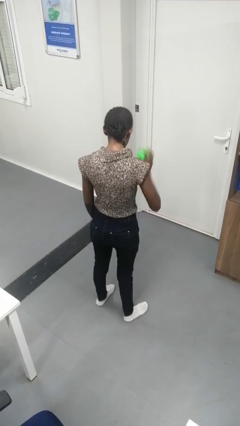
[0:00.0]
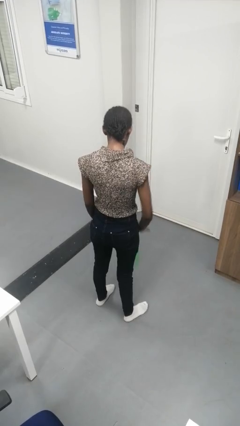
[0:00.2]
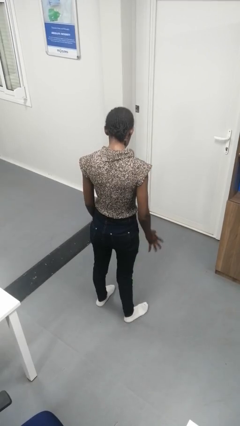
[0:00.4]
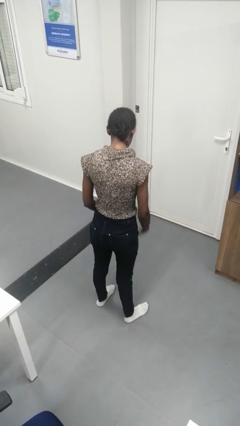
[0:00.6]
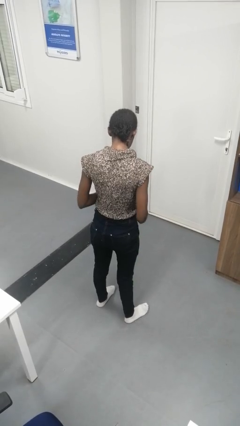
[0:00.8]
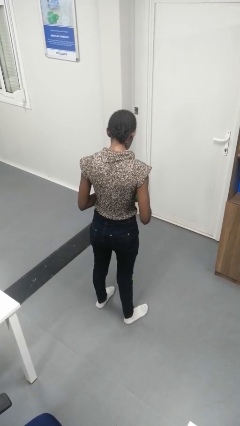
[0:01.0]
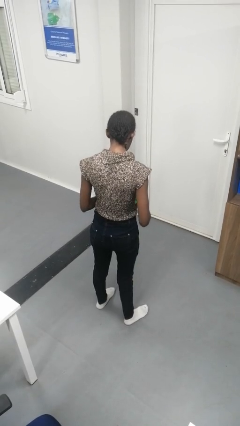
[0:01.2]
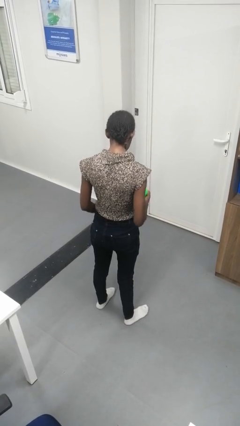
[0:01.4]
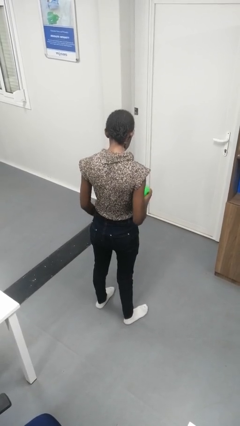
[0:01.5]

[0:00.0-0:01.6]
person bounces ball on floor

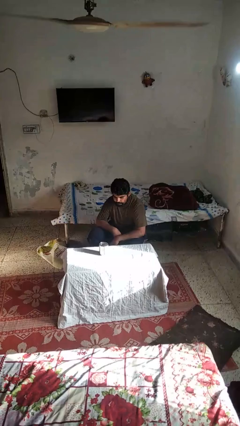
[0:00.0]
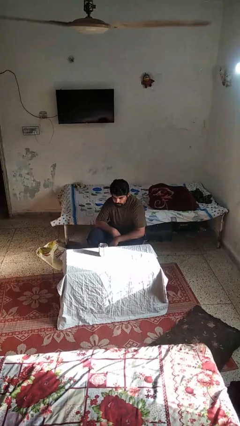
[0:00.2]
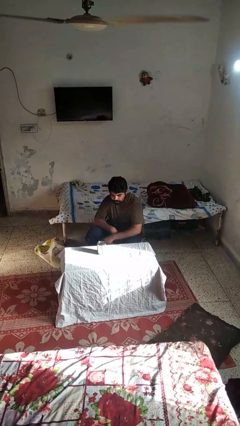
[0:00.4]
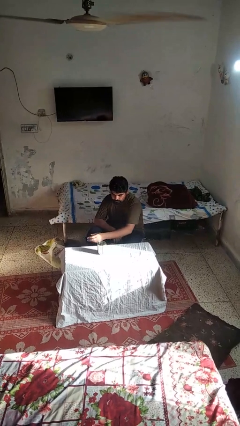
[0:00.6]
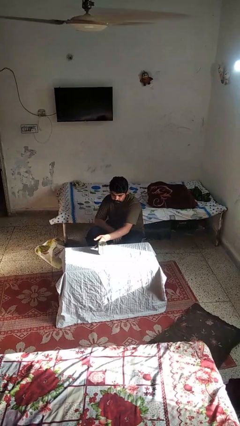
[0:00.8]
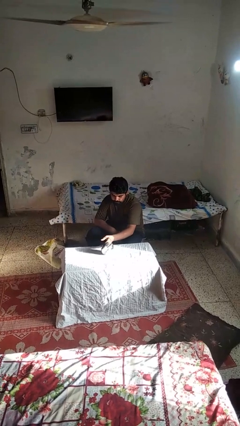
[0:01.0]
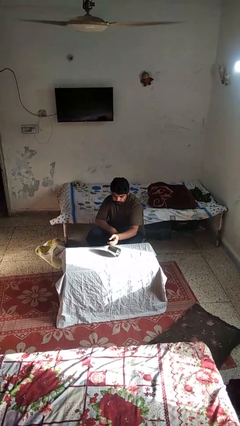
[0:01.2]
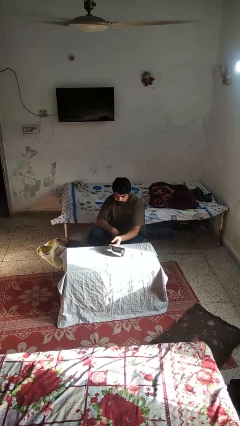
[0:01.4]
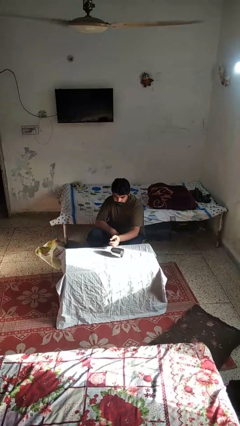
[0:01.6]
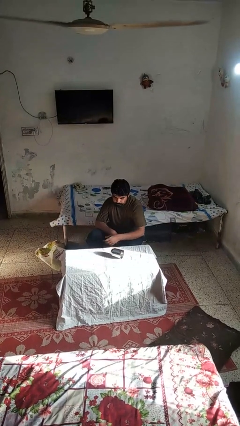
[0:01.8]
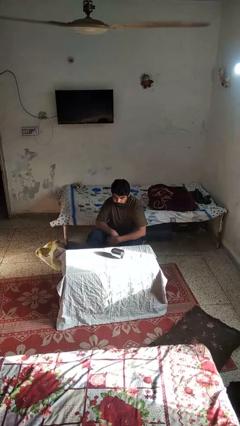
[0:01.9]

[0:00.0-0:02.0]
person knocks over glass

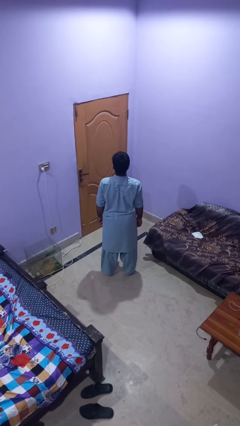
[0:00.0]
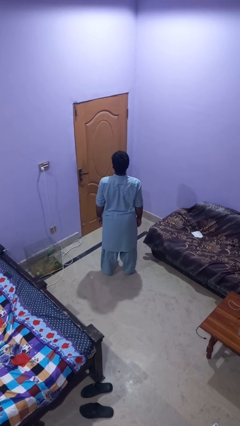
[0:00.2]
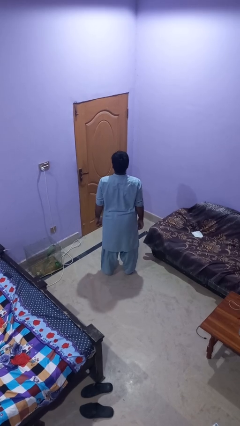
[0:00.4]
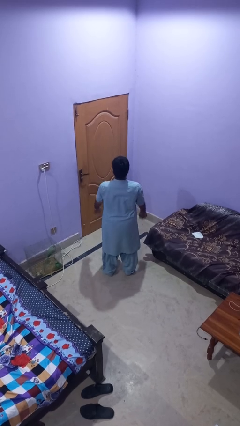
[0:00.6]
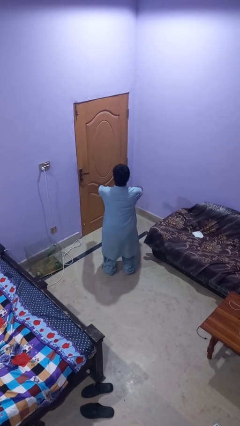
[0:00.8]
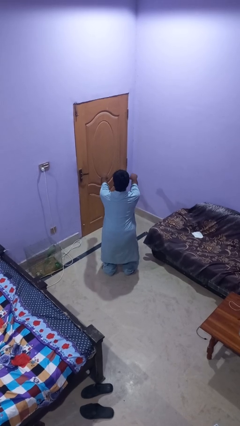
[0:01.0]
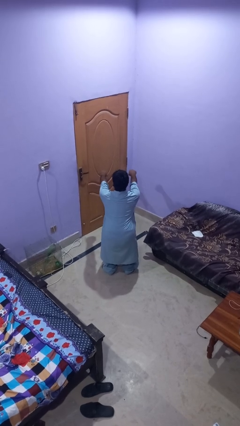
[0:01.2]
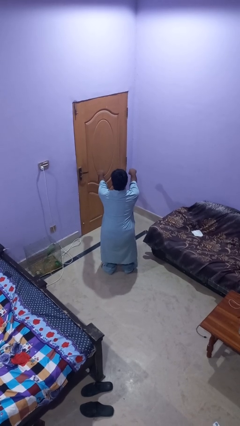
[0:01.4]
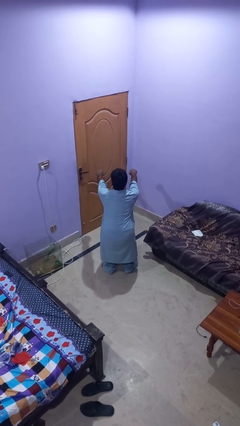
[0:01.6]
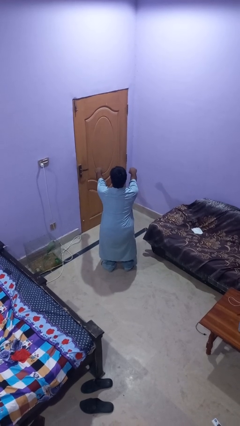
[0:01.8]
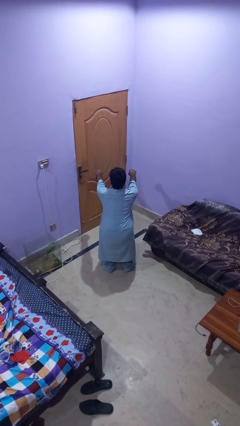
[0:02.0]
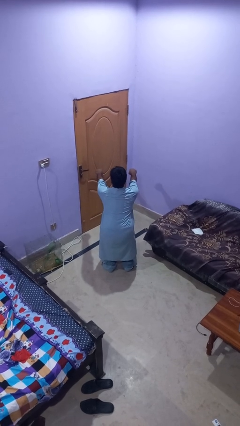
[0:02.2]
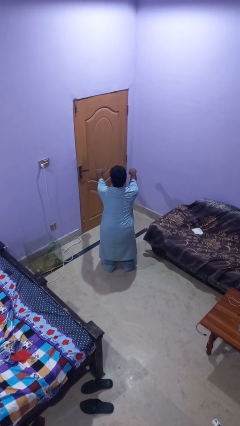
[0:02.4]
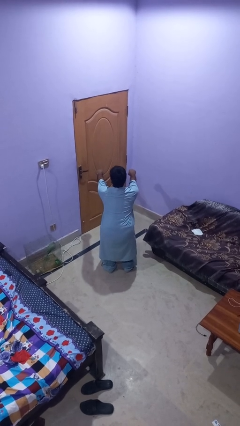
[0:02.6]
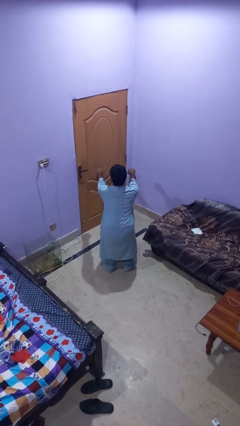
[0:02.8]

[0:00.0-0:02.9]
person squats

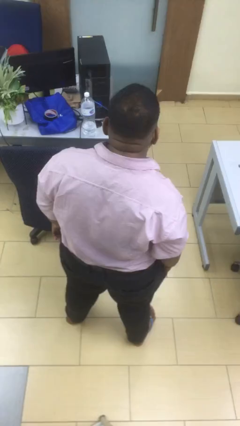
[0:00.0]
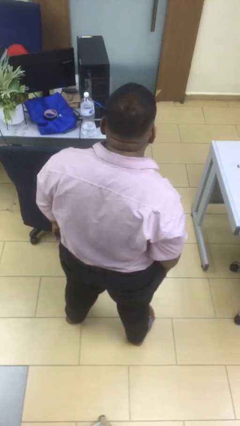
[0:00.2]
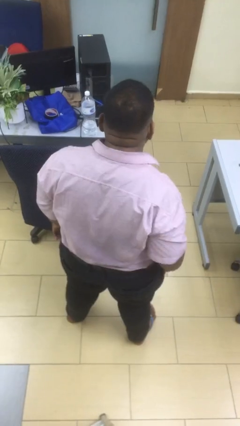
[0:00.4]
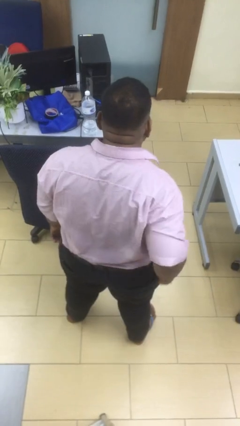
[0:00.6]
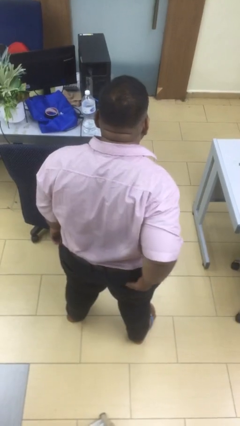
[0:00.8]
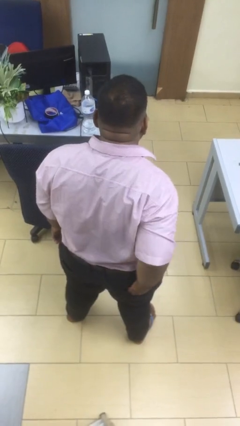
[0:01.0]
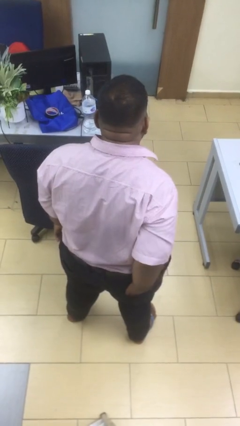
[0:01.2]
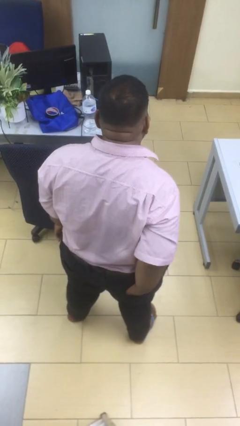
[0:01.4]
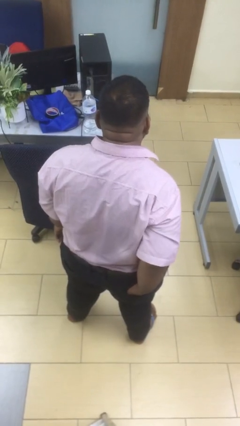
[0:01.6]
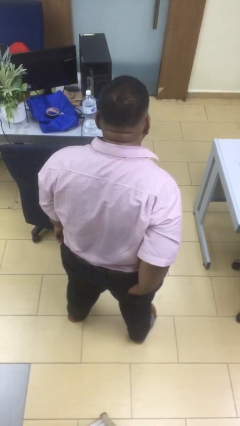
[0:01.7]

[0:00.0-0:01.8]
person puts hands in back pockets

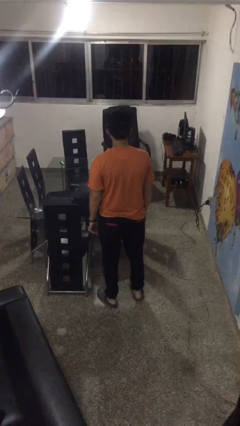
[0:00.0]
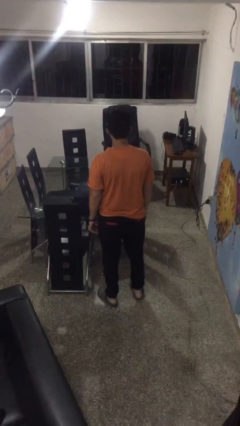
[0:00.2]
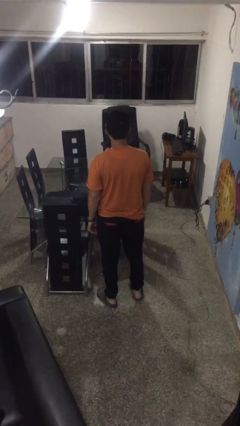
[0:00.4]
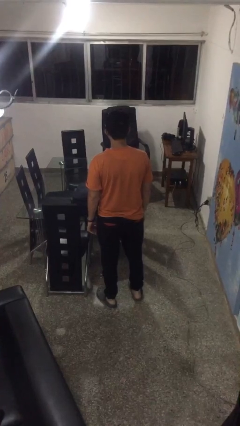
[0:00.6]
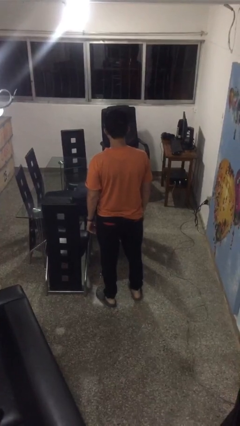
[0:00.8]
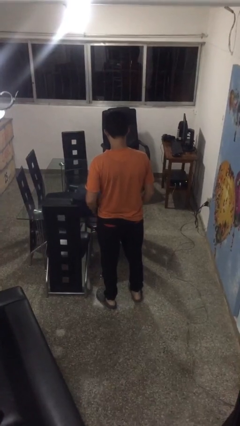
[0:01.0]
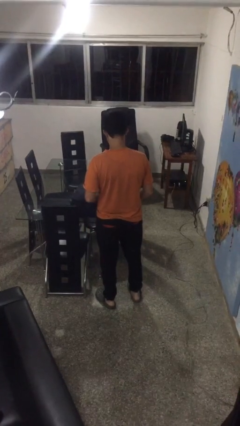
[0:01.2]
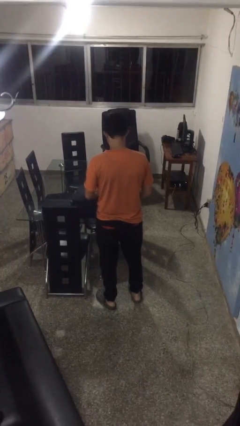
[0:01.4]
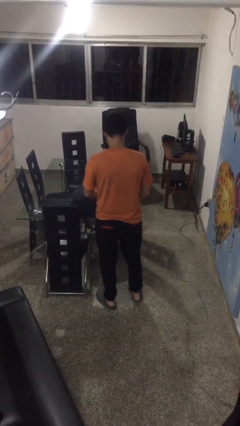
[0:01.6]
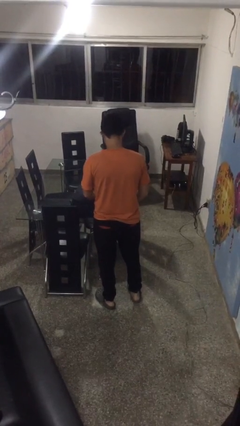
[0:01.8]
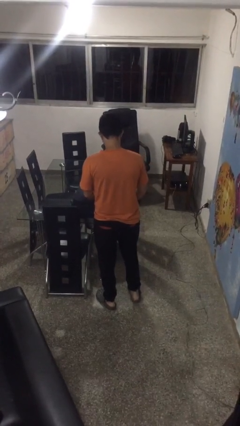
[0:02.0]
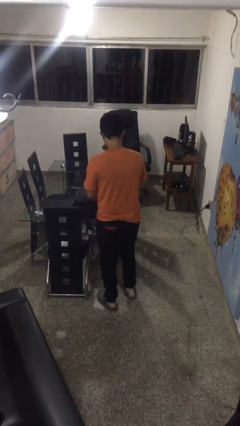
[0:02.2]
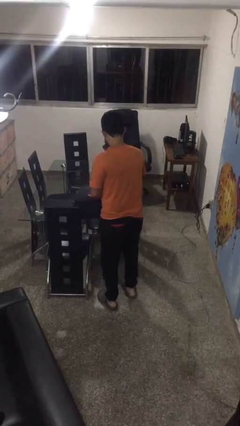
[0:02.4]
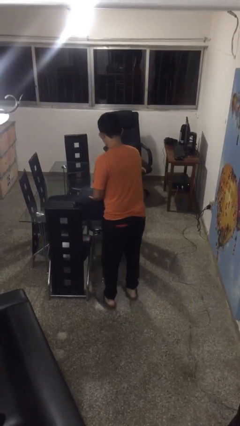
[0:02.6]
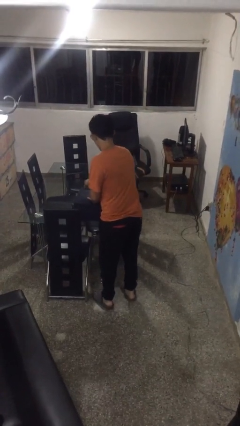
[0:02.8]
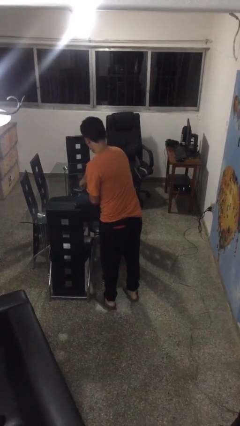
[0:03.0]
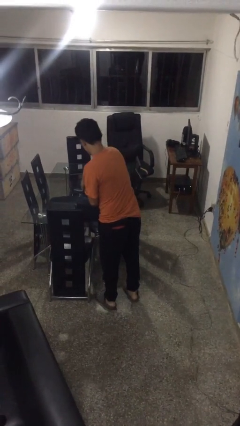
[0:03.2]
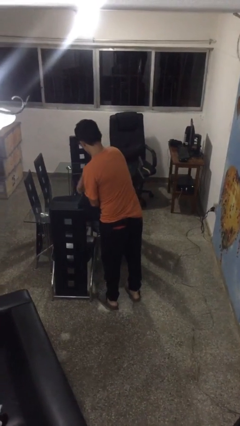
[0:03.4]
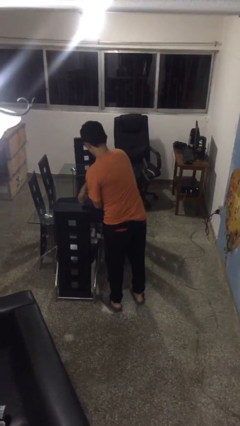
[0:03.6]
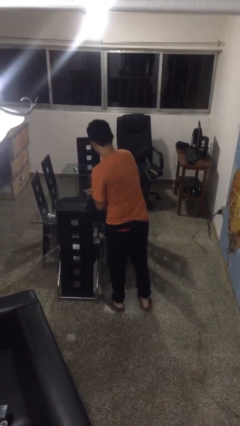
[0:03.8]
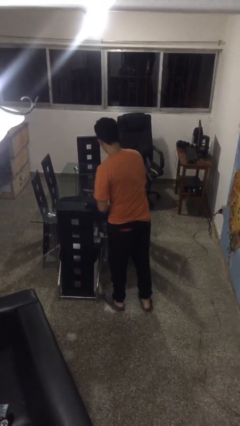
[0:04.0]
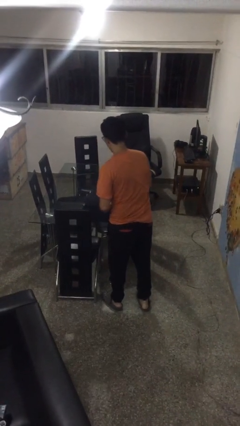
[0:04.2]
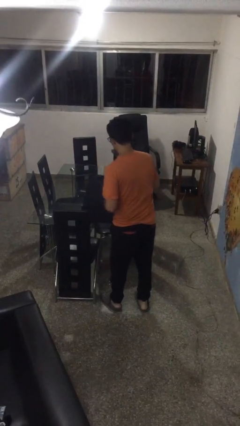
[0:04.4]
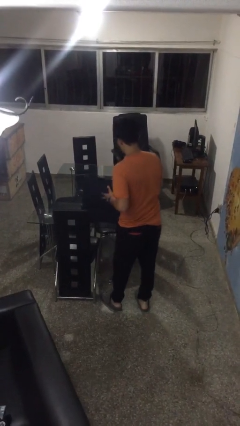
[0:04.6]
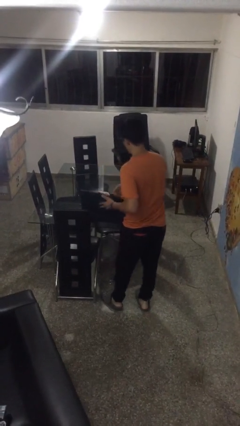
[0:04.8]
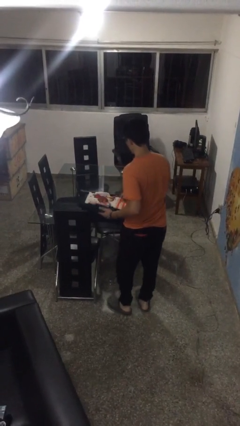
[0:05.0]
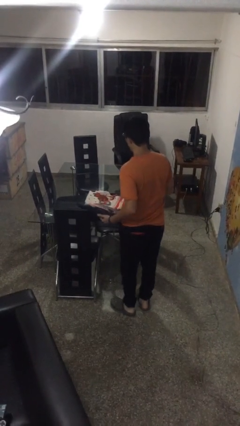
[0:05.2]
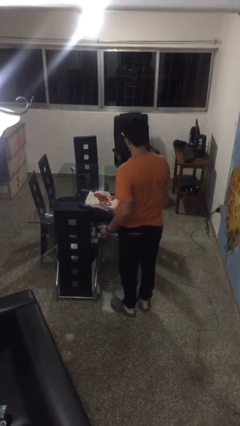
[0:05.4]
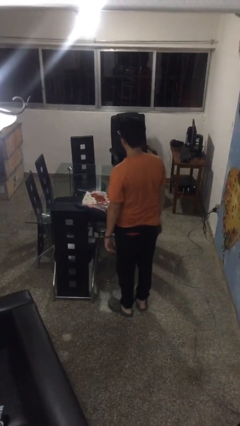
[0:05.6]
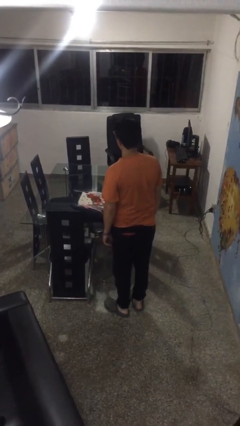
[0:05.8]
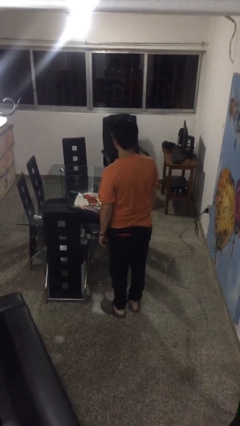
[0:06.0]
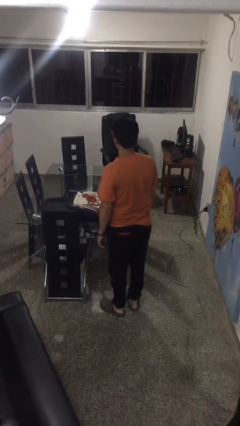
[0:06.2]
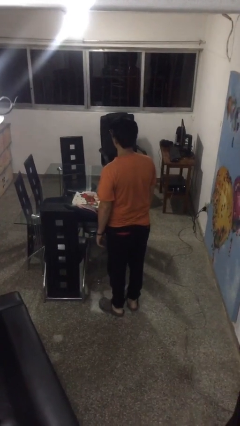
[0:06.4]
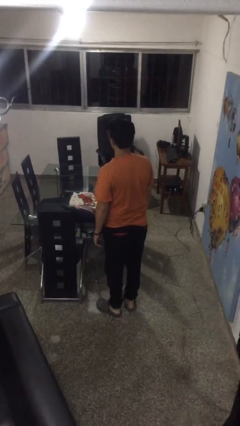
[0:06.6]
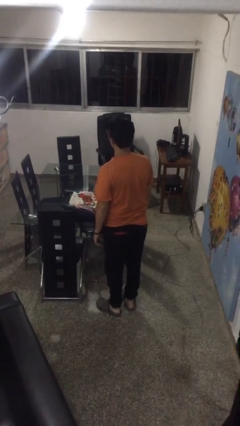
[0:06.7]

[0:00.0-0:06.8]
person opens suitcase

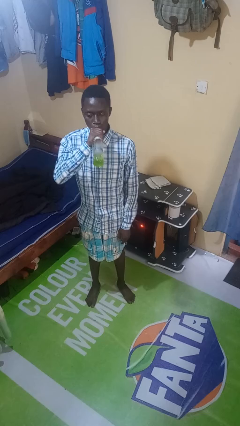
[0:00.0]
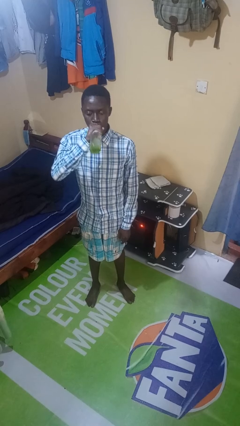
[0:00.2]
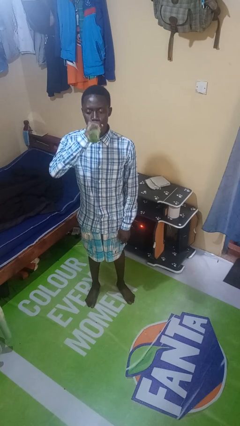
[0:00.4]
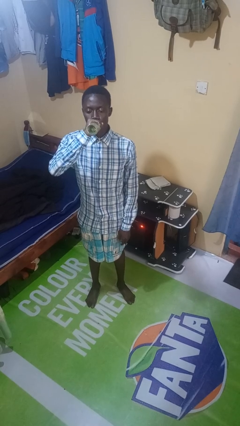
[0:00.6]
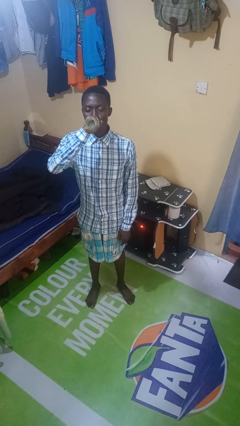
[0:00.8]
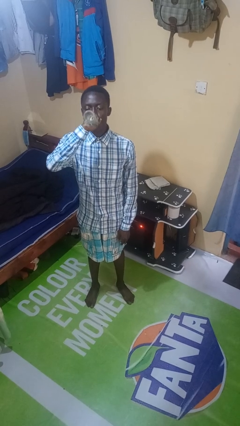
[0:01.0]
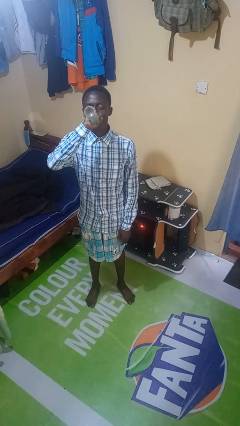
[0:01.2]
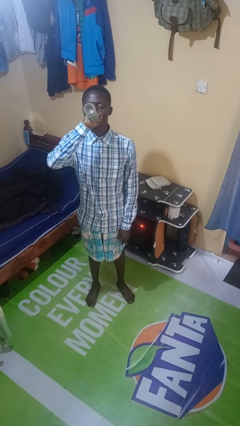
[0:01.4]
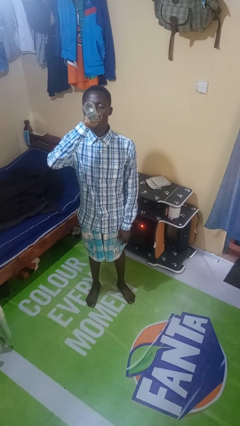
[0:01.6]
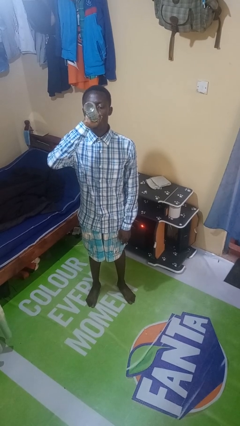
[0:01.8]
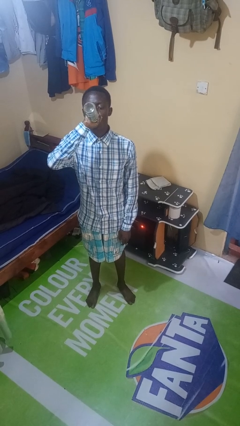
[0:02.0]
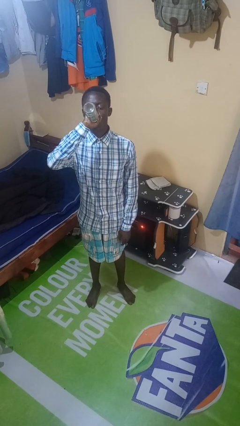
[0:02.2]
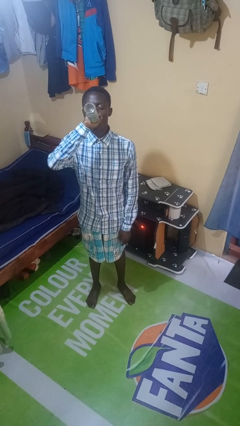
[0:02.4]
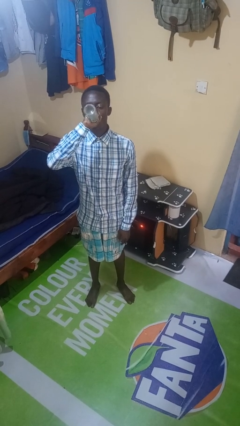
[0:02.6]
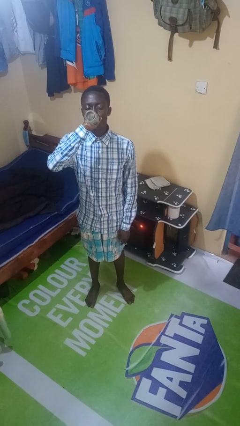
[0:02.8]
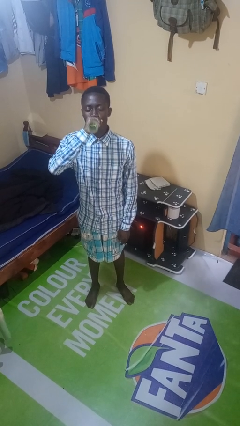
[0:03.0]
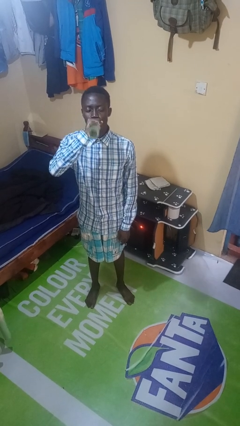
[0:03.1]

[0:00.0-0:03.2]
person drinks from bottle
